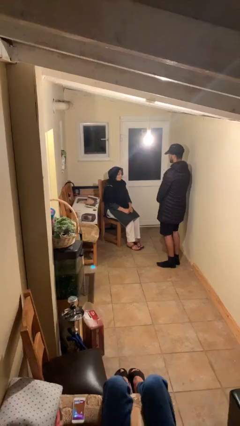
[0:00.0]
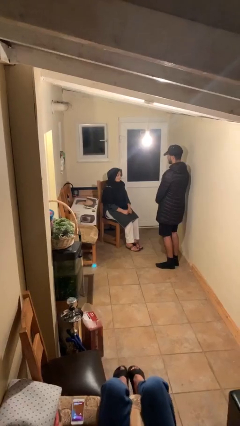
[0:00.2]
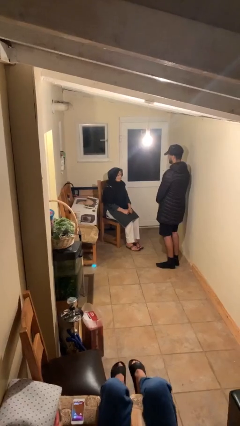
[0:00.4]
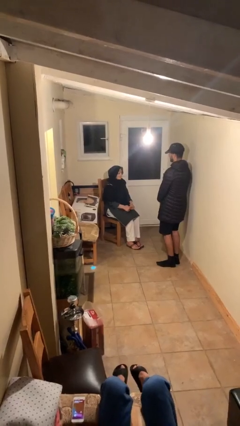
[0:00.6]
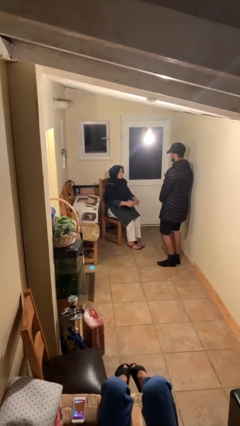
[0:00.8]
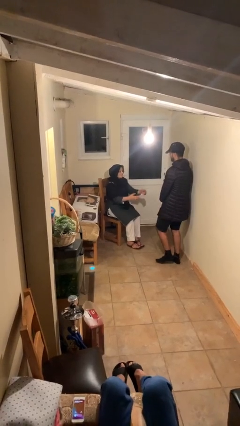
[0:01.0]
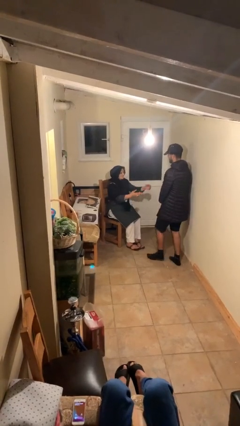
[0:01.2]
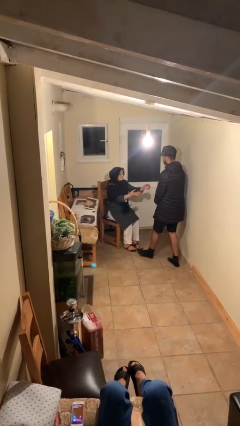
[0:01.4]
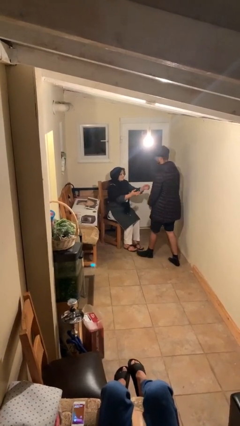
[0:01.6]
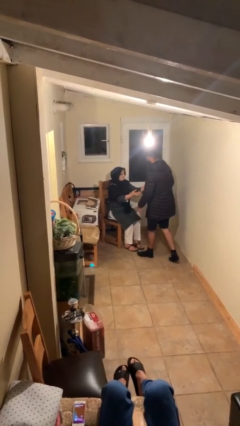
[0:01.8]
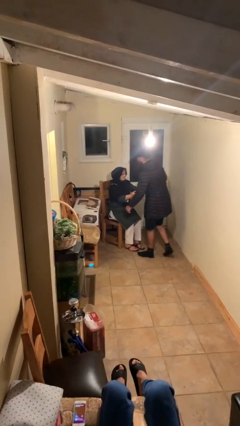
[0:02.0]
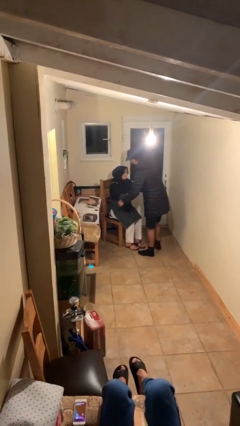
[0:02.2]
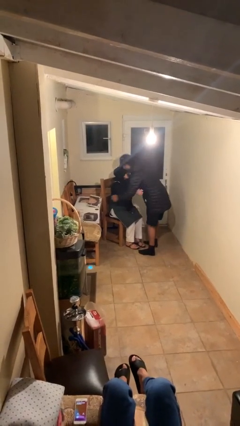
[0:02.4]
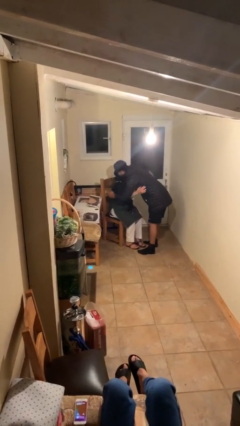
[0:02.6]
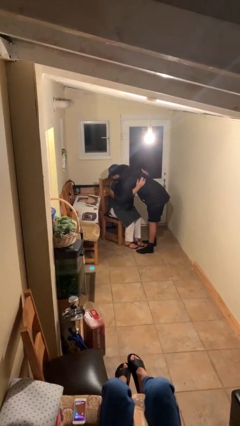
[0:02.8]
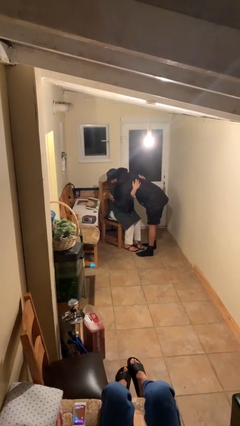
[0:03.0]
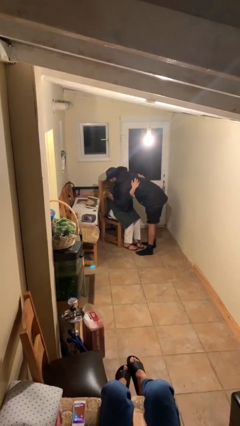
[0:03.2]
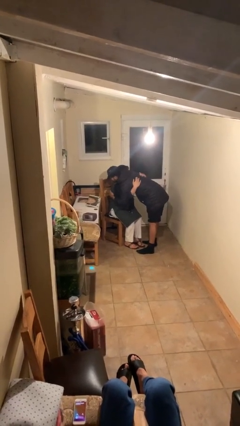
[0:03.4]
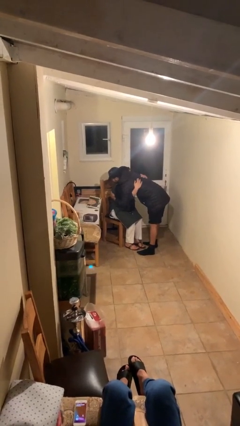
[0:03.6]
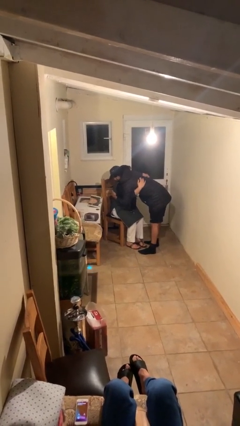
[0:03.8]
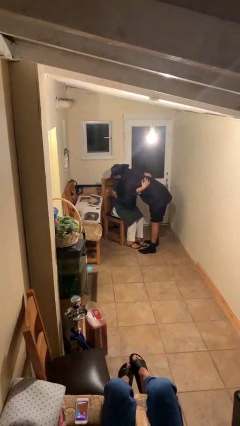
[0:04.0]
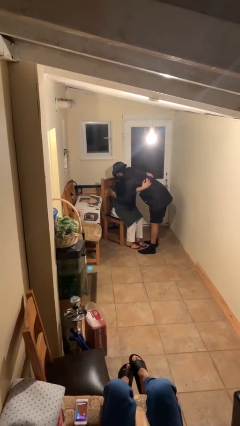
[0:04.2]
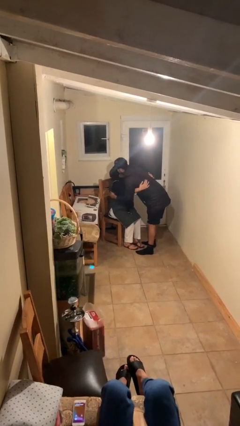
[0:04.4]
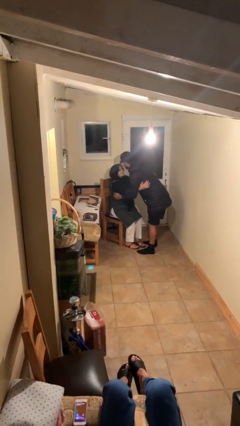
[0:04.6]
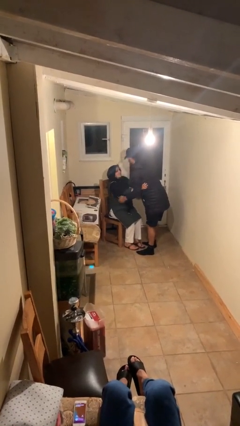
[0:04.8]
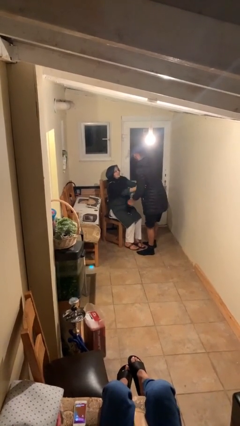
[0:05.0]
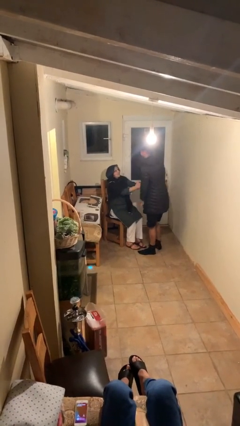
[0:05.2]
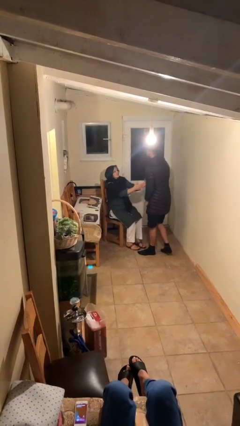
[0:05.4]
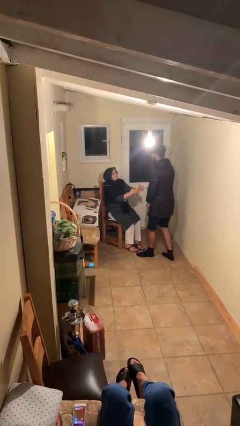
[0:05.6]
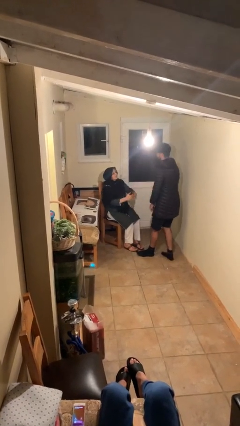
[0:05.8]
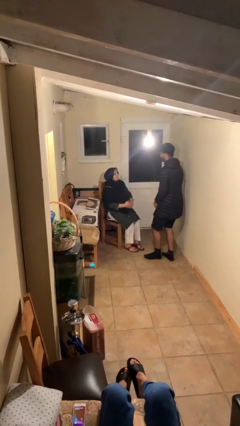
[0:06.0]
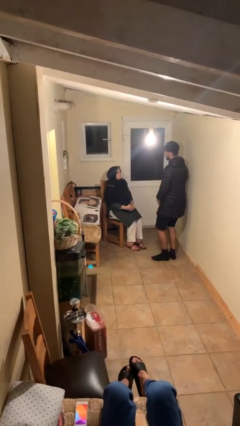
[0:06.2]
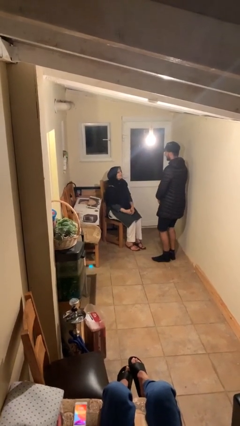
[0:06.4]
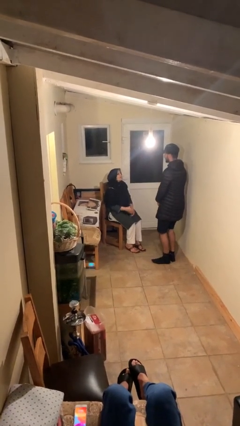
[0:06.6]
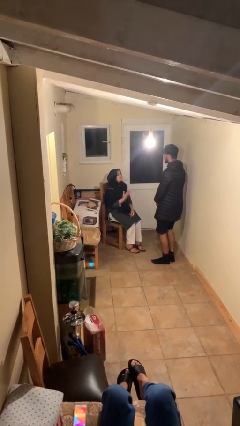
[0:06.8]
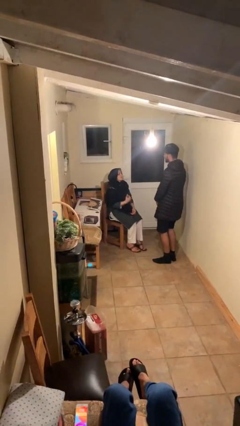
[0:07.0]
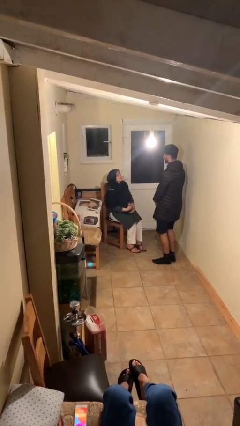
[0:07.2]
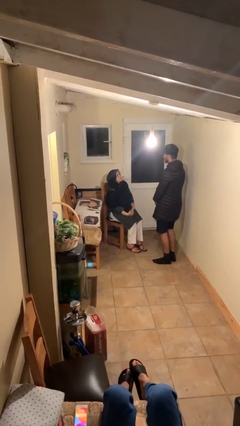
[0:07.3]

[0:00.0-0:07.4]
person embraces person

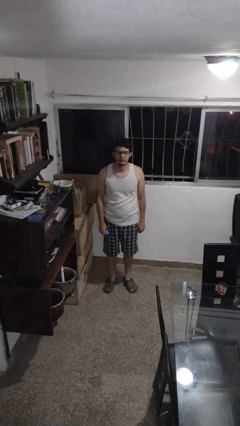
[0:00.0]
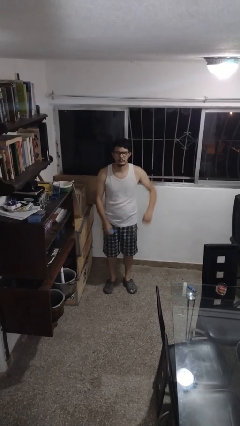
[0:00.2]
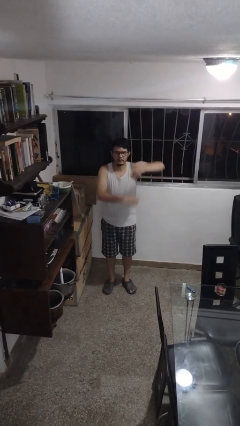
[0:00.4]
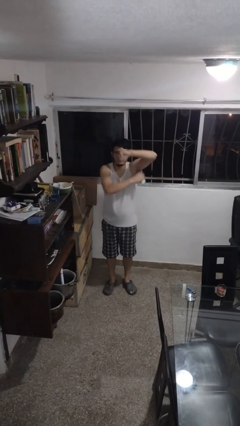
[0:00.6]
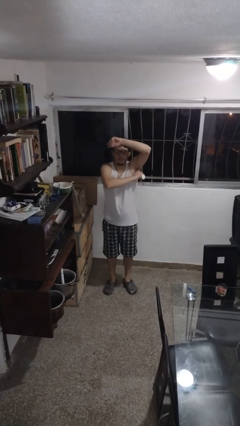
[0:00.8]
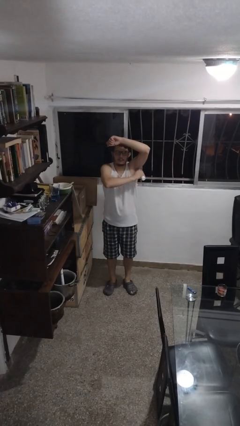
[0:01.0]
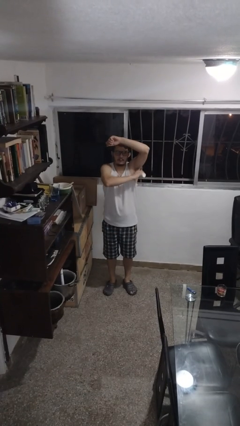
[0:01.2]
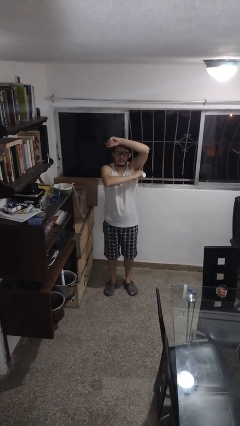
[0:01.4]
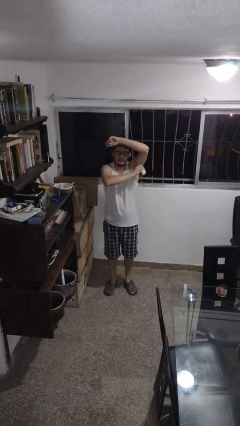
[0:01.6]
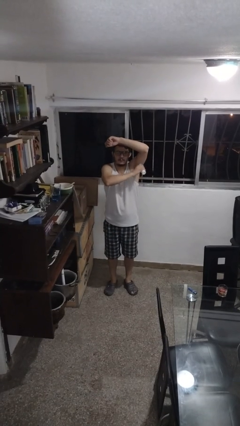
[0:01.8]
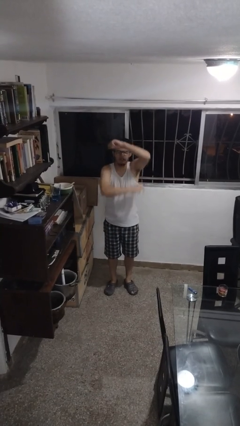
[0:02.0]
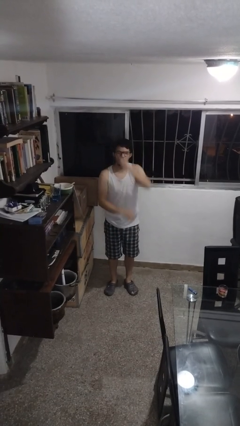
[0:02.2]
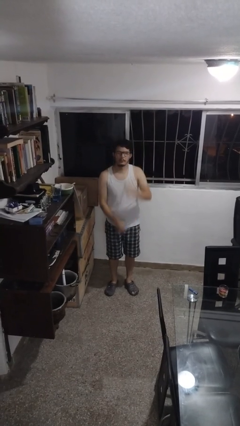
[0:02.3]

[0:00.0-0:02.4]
person applies deodorant

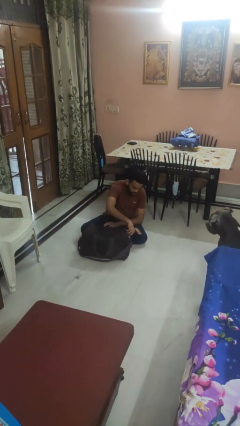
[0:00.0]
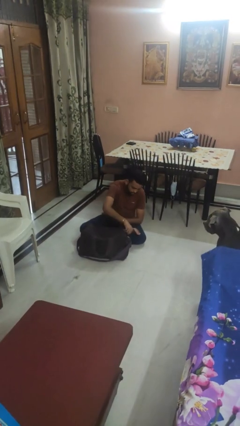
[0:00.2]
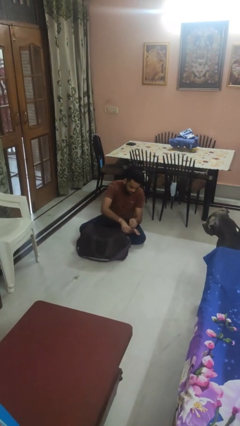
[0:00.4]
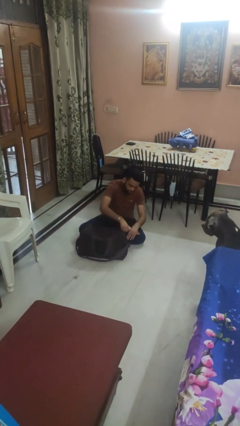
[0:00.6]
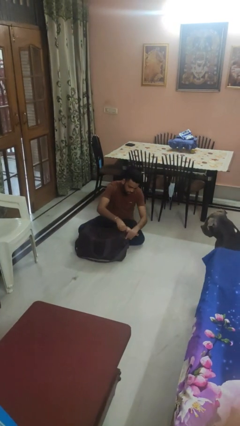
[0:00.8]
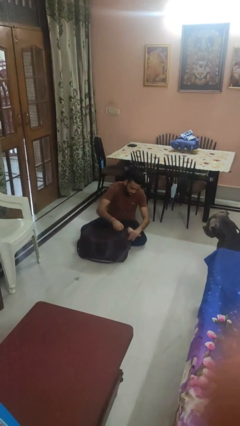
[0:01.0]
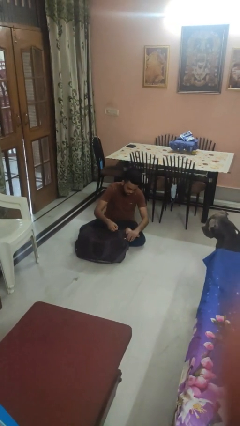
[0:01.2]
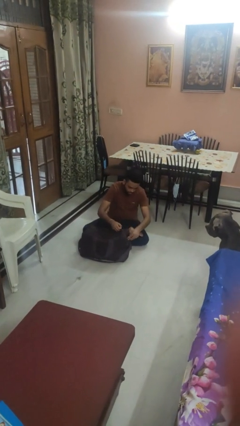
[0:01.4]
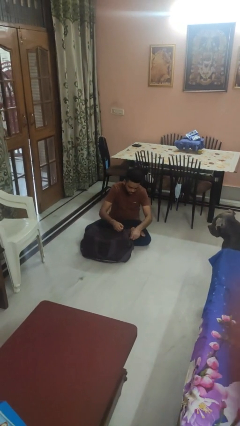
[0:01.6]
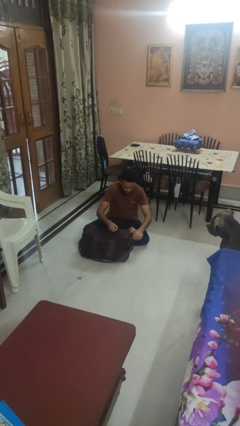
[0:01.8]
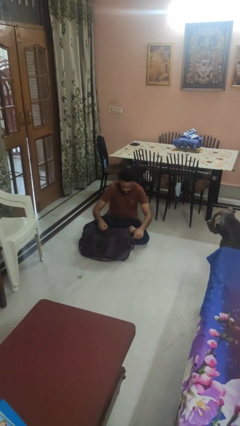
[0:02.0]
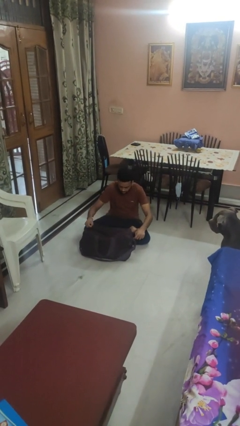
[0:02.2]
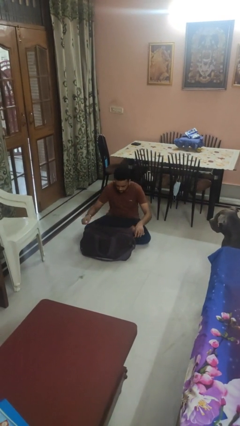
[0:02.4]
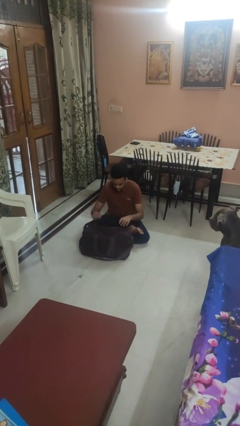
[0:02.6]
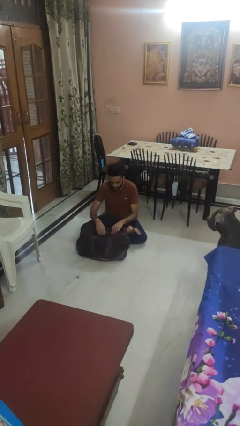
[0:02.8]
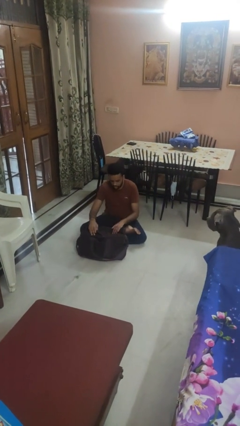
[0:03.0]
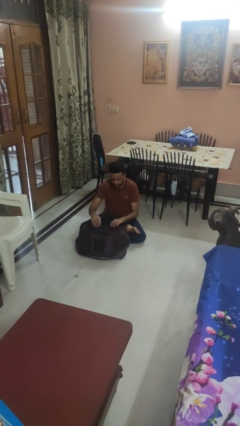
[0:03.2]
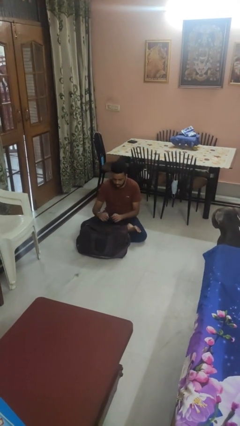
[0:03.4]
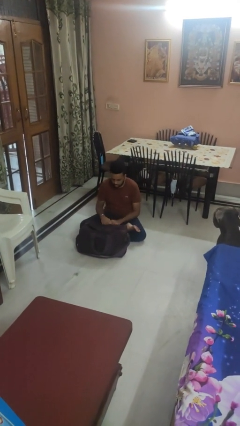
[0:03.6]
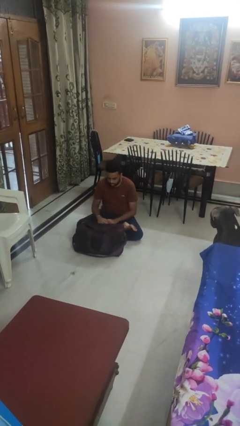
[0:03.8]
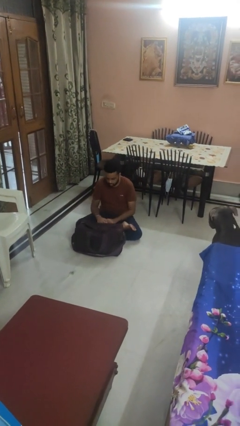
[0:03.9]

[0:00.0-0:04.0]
person opens suitcase

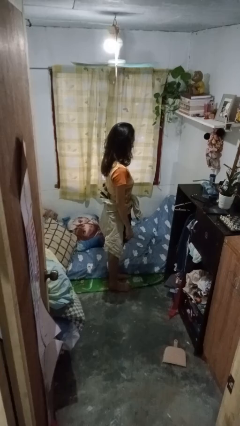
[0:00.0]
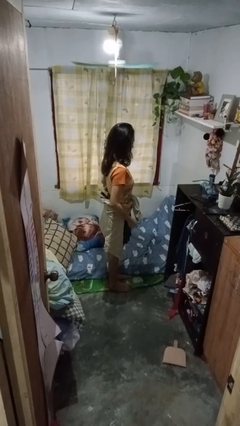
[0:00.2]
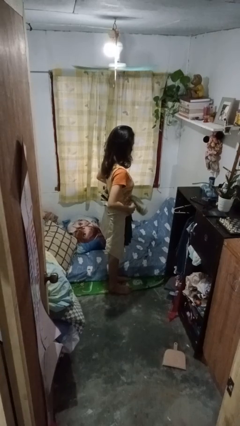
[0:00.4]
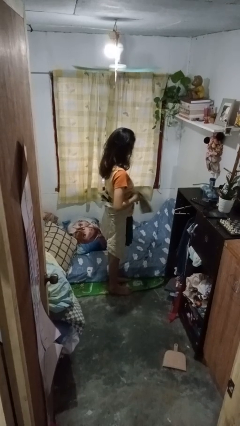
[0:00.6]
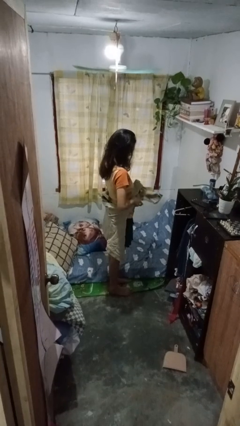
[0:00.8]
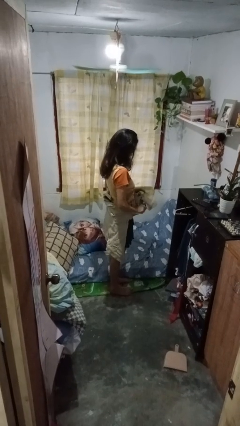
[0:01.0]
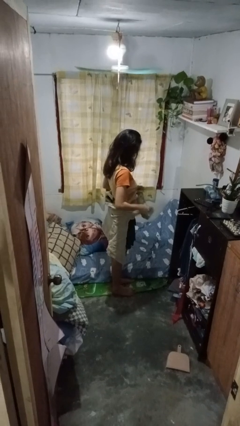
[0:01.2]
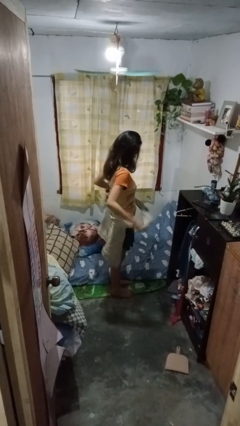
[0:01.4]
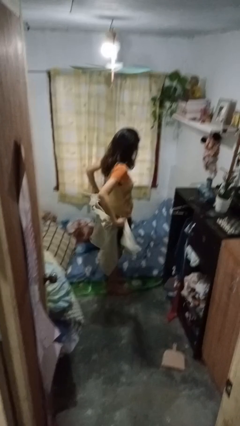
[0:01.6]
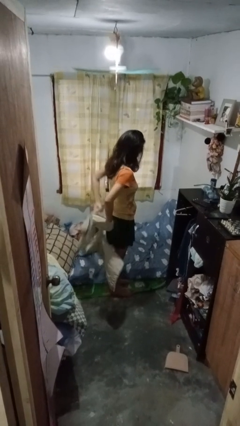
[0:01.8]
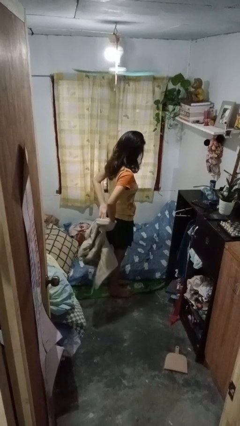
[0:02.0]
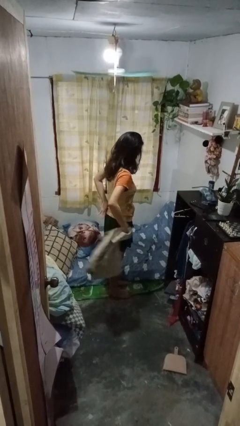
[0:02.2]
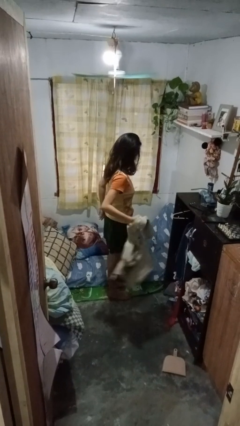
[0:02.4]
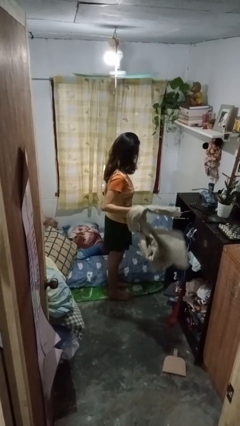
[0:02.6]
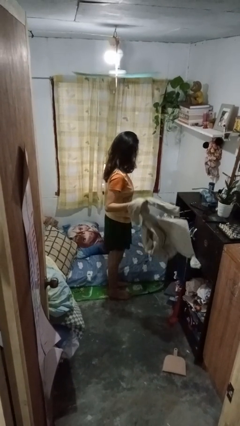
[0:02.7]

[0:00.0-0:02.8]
person unties jacket around waist

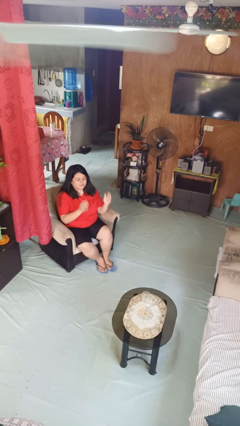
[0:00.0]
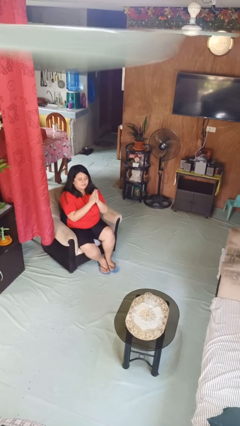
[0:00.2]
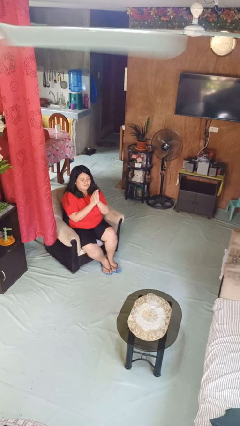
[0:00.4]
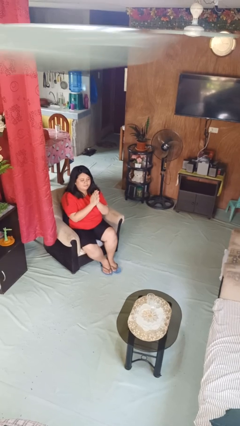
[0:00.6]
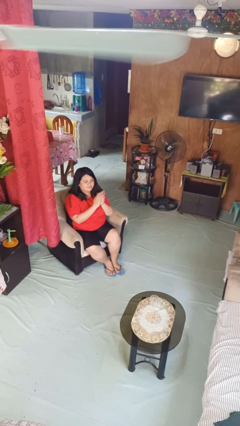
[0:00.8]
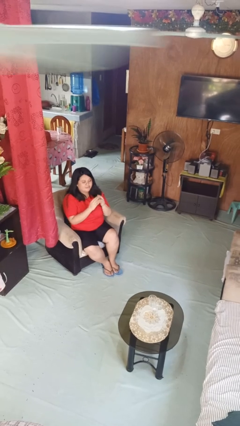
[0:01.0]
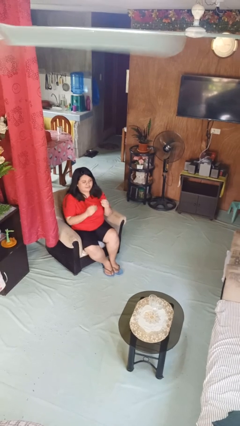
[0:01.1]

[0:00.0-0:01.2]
person claps hands
